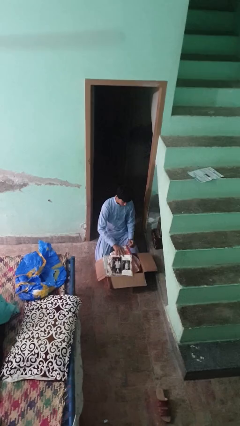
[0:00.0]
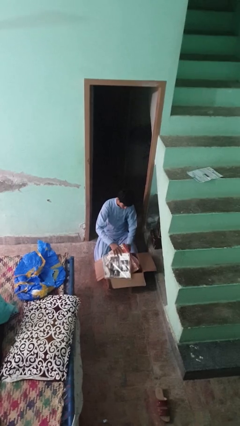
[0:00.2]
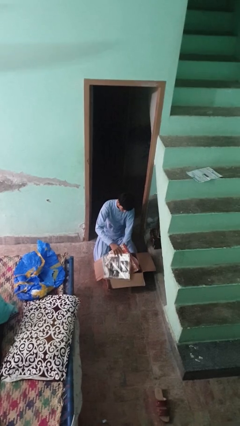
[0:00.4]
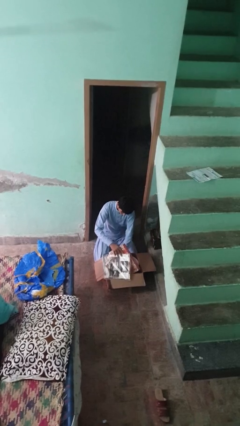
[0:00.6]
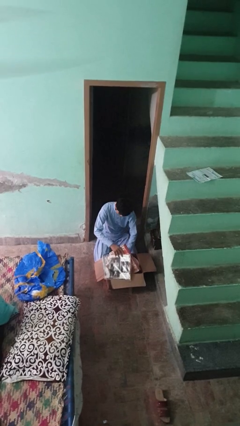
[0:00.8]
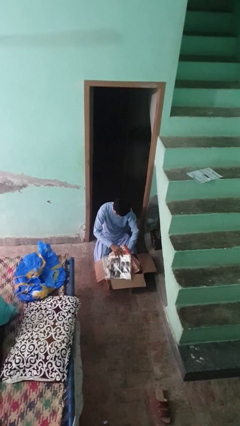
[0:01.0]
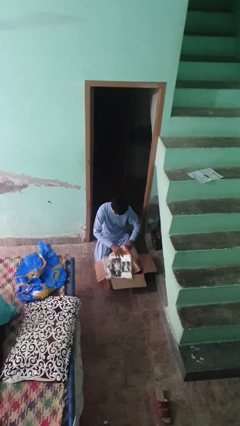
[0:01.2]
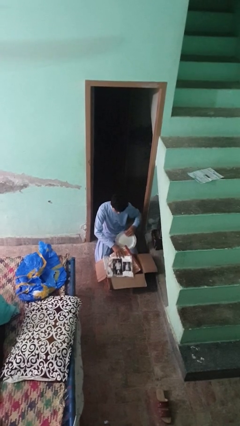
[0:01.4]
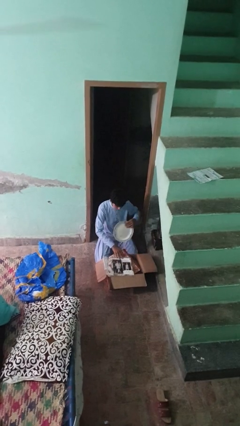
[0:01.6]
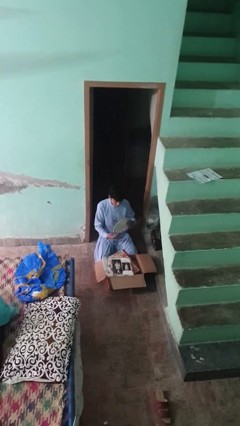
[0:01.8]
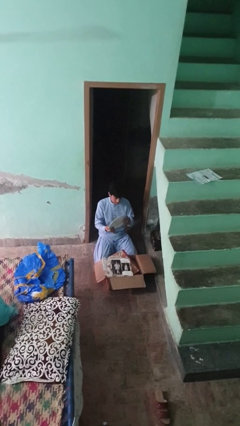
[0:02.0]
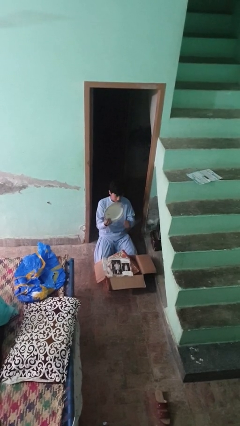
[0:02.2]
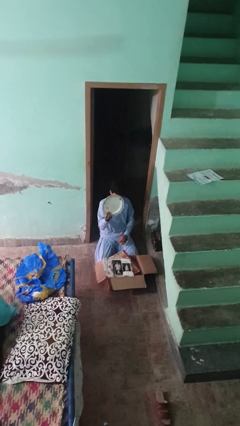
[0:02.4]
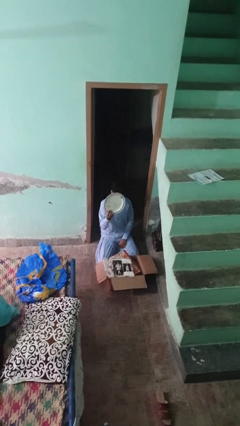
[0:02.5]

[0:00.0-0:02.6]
person takes object from box

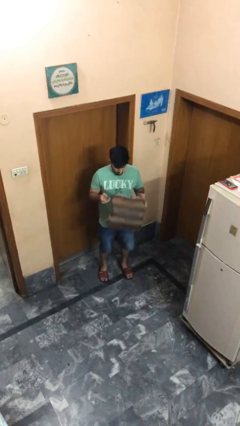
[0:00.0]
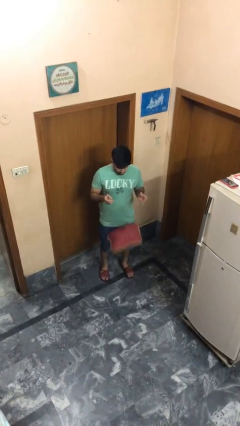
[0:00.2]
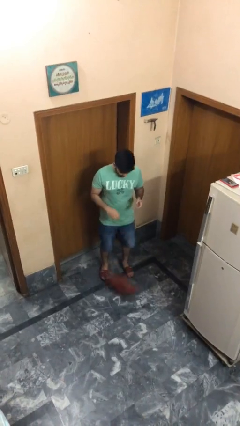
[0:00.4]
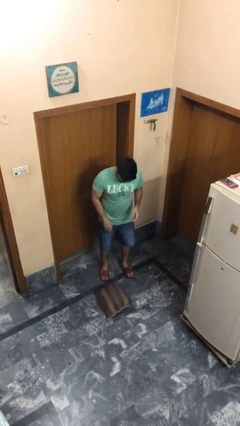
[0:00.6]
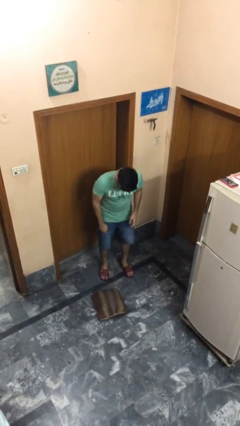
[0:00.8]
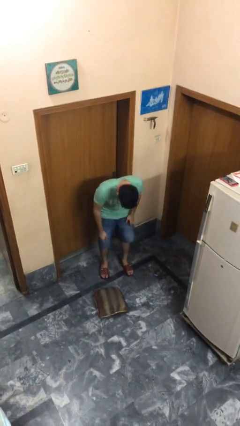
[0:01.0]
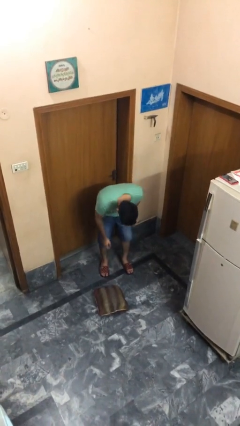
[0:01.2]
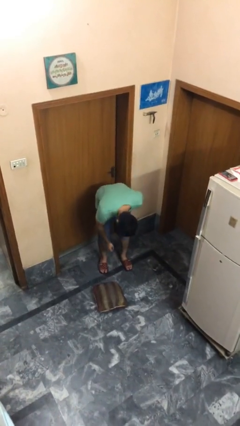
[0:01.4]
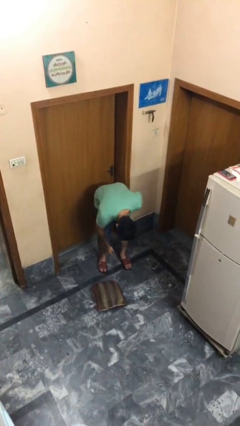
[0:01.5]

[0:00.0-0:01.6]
person drops object

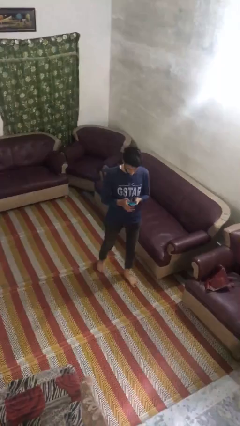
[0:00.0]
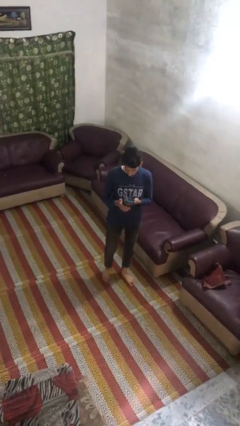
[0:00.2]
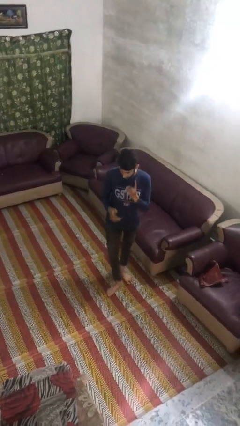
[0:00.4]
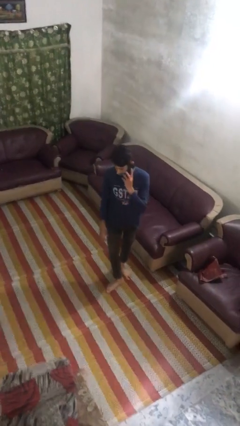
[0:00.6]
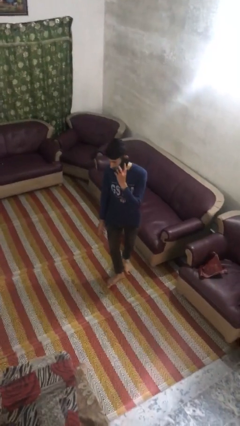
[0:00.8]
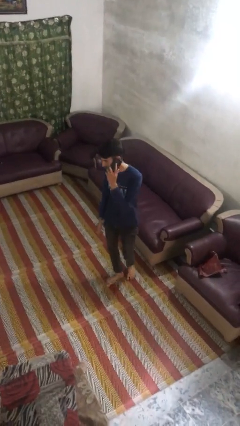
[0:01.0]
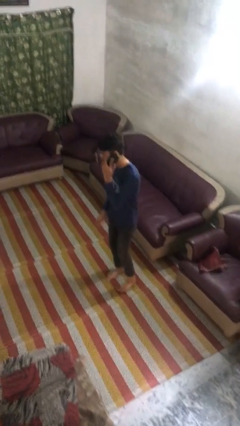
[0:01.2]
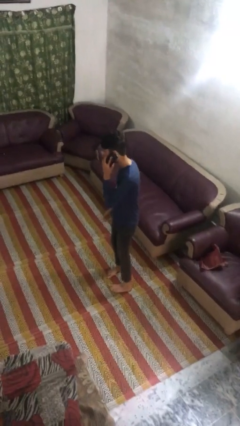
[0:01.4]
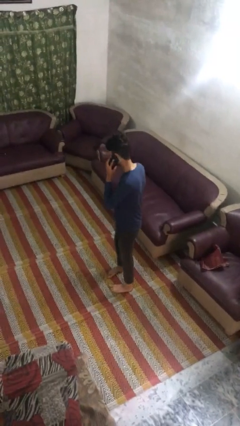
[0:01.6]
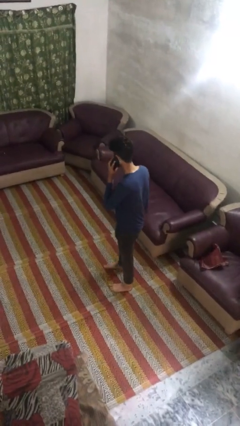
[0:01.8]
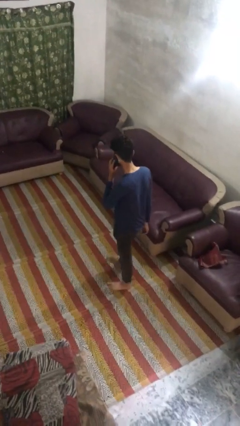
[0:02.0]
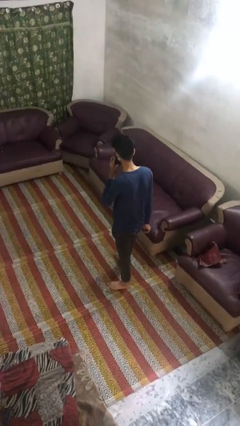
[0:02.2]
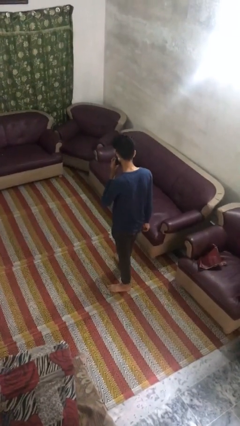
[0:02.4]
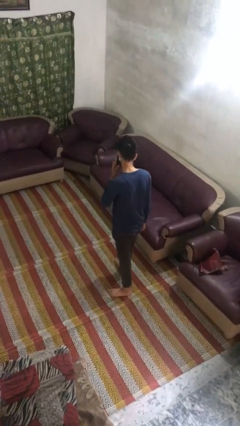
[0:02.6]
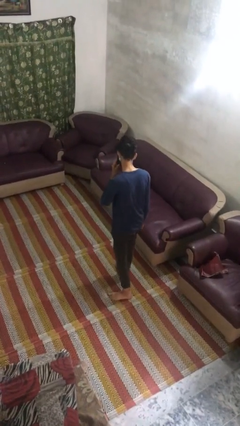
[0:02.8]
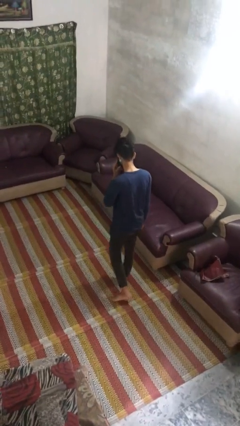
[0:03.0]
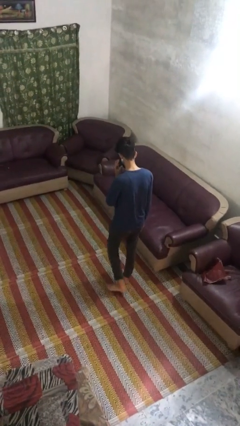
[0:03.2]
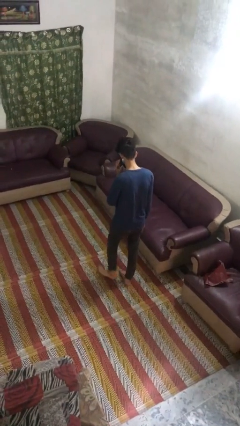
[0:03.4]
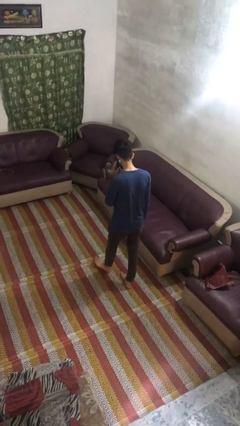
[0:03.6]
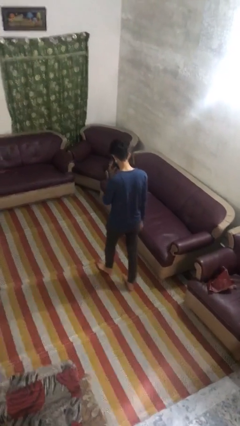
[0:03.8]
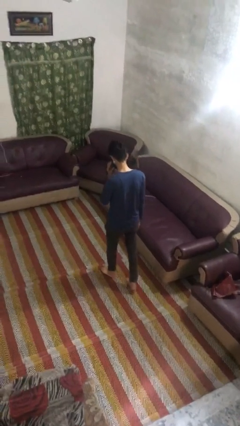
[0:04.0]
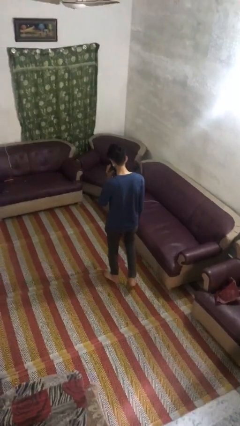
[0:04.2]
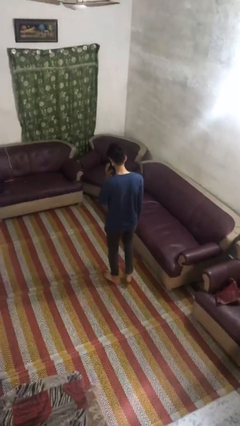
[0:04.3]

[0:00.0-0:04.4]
person talks on phone

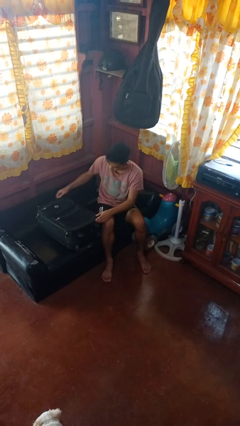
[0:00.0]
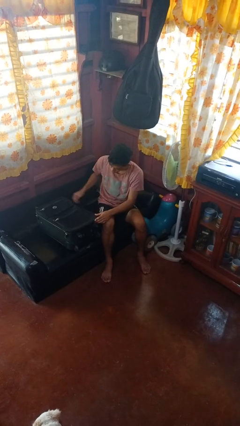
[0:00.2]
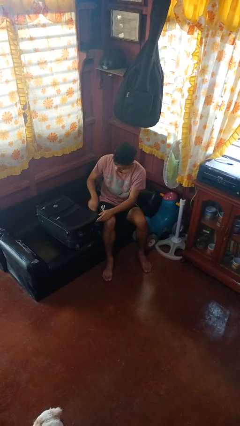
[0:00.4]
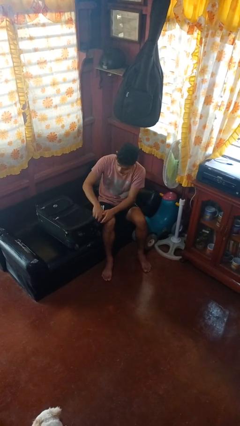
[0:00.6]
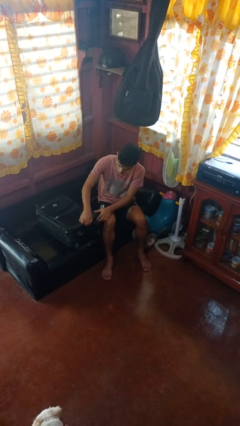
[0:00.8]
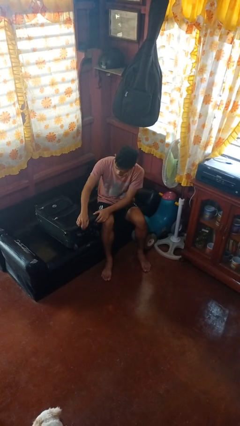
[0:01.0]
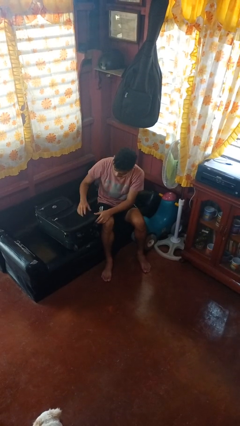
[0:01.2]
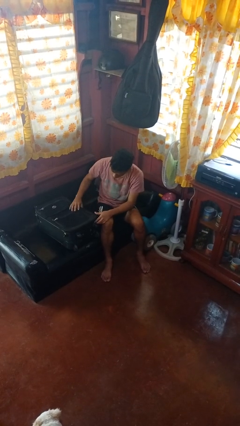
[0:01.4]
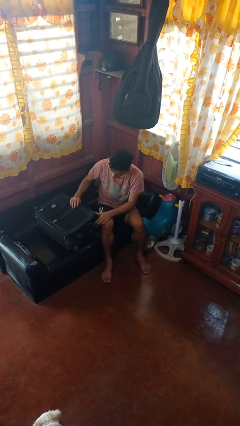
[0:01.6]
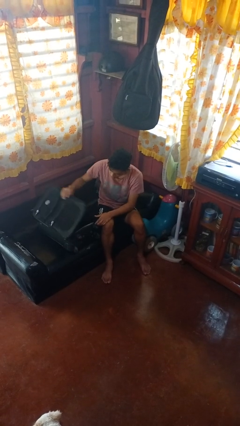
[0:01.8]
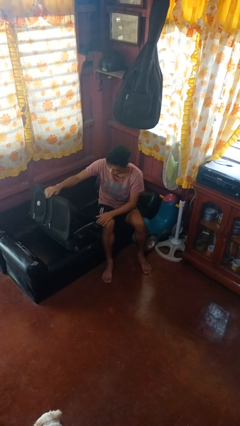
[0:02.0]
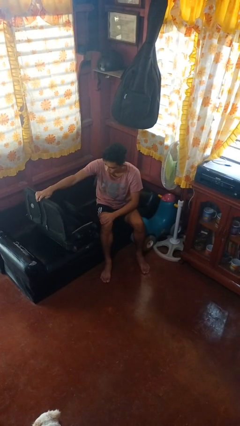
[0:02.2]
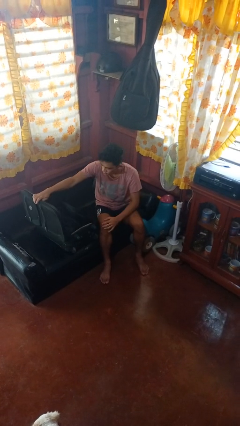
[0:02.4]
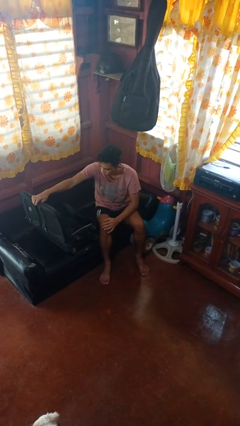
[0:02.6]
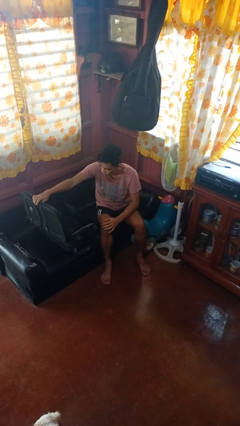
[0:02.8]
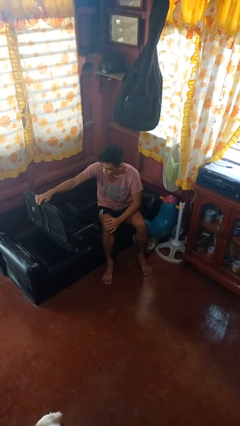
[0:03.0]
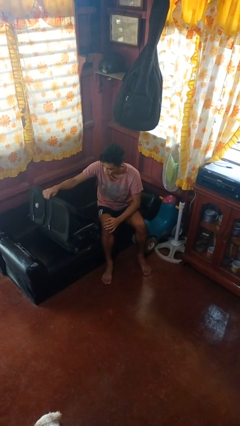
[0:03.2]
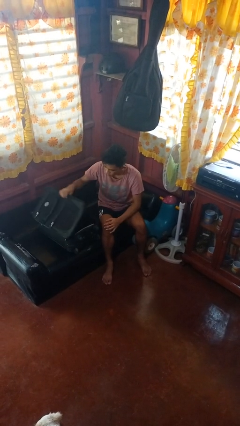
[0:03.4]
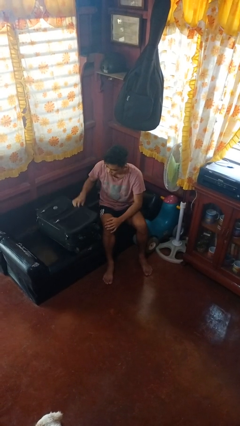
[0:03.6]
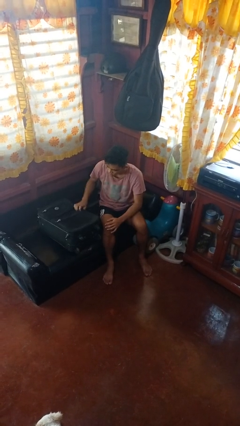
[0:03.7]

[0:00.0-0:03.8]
person opens suitcase

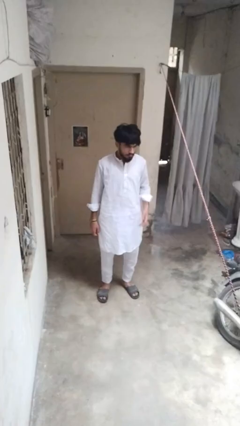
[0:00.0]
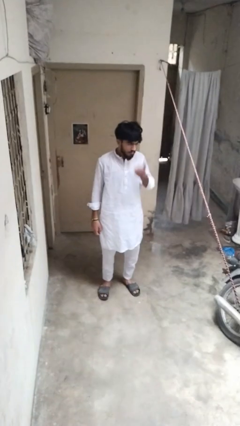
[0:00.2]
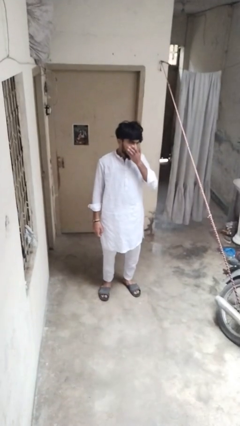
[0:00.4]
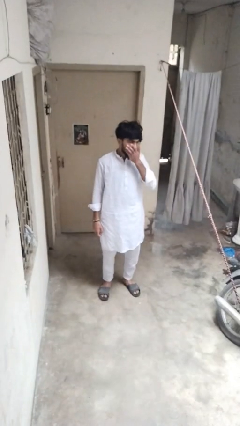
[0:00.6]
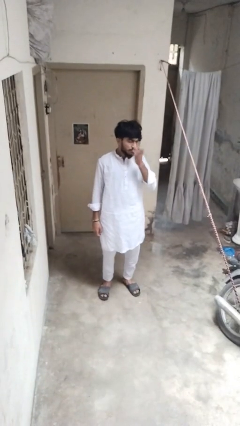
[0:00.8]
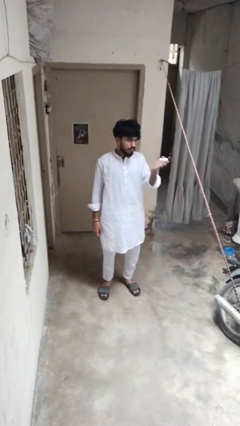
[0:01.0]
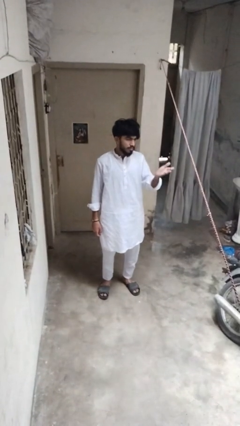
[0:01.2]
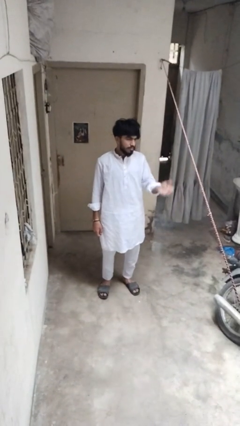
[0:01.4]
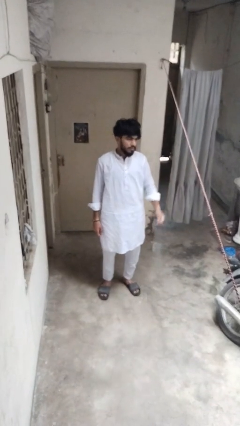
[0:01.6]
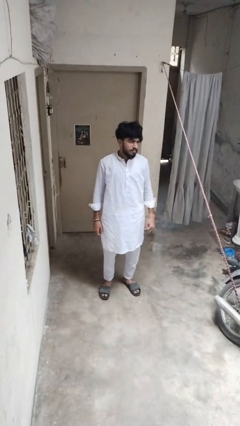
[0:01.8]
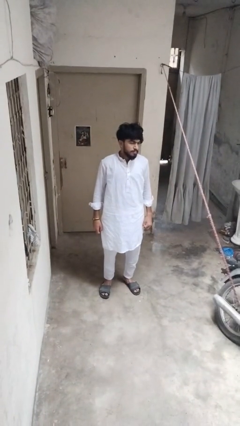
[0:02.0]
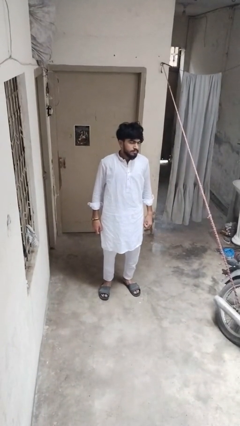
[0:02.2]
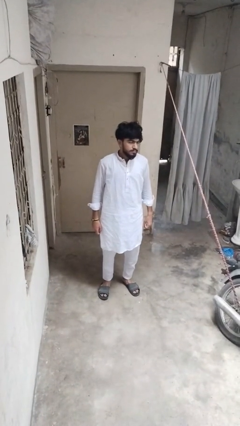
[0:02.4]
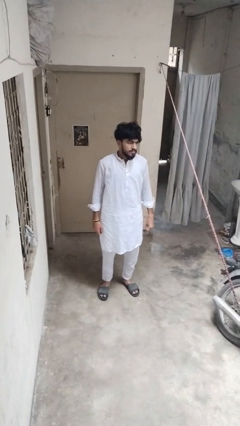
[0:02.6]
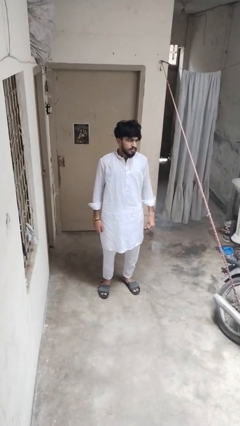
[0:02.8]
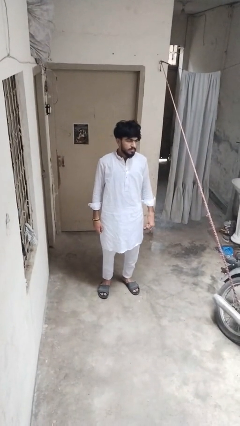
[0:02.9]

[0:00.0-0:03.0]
person gestures blow kiss

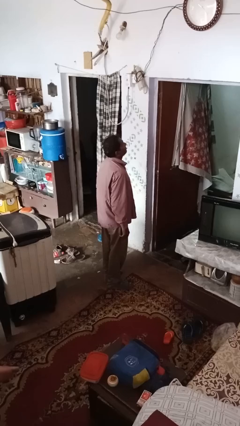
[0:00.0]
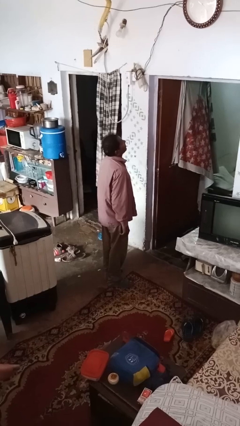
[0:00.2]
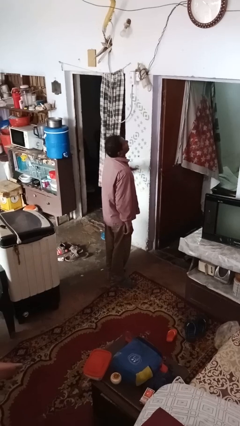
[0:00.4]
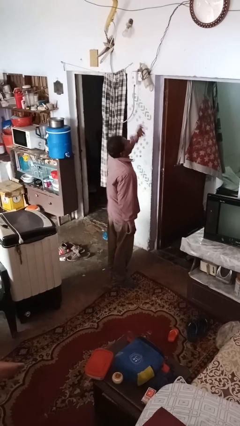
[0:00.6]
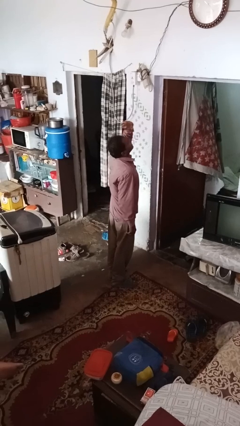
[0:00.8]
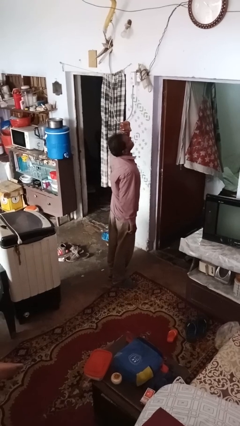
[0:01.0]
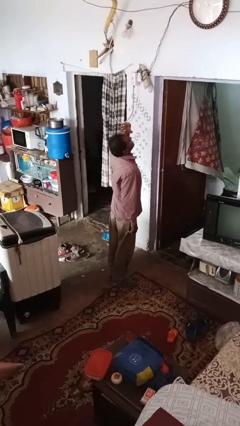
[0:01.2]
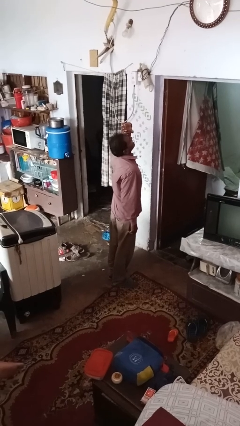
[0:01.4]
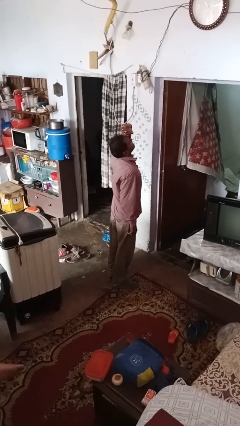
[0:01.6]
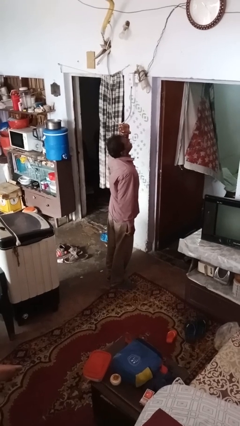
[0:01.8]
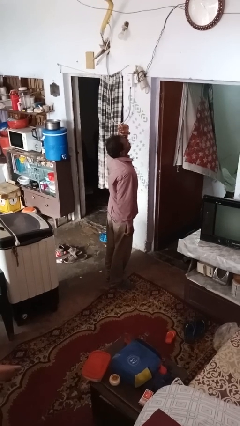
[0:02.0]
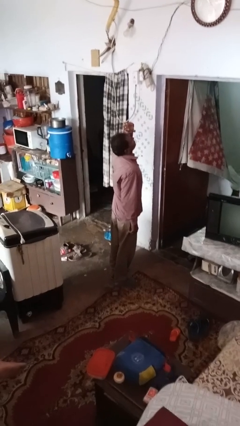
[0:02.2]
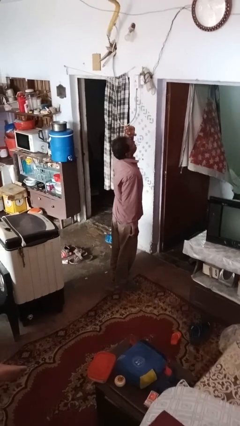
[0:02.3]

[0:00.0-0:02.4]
person gestures watch closely
